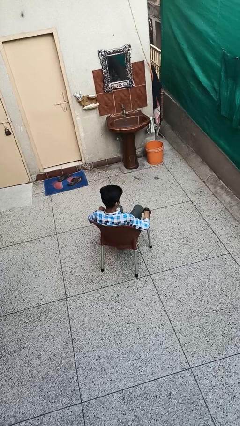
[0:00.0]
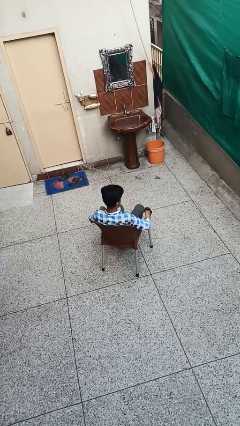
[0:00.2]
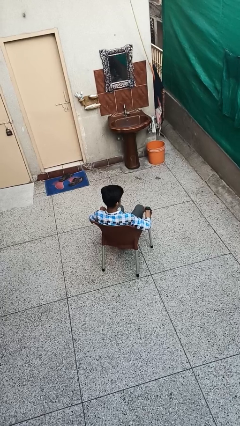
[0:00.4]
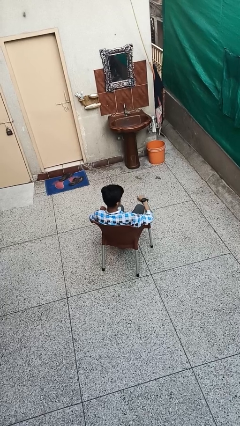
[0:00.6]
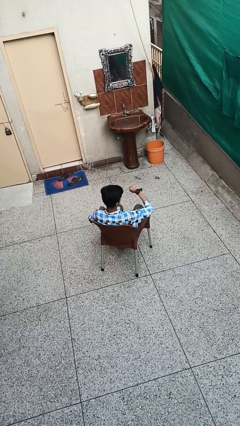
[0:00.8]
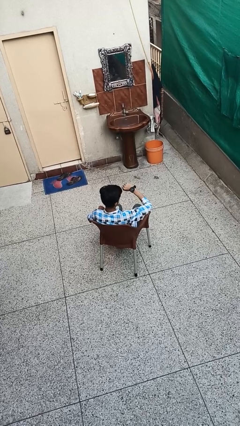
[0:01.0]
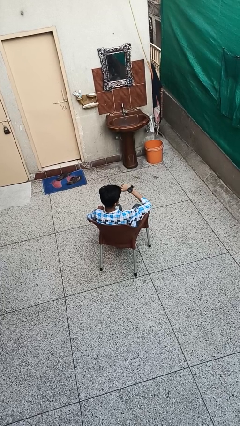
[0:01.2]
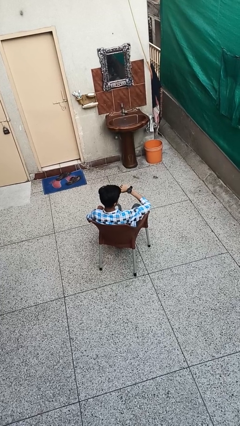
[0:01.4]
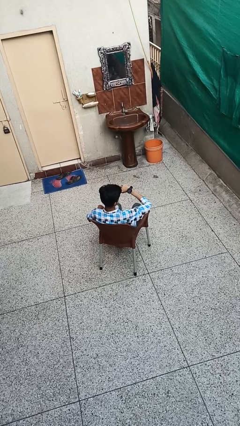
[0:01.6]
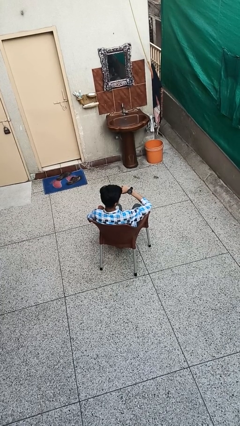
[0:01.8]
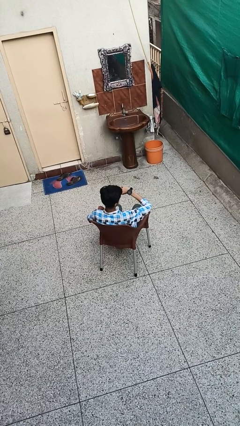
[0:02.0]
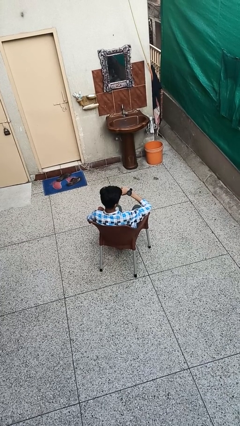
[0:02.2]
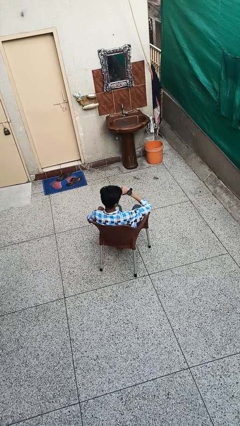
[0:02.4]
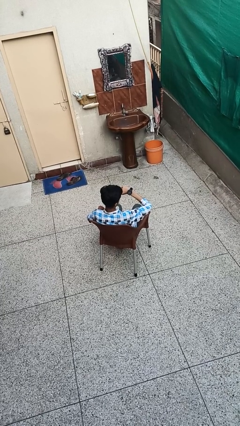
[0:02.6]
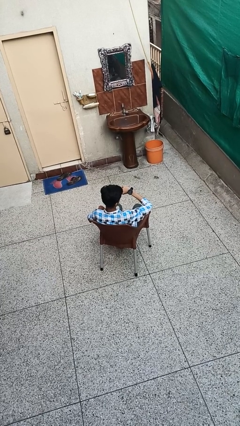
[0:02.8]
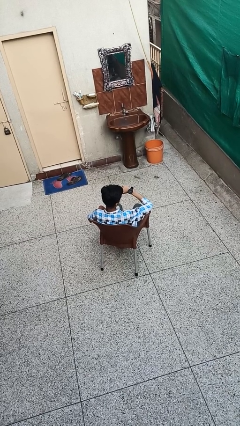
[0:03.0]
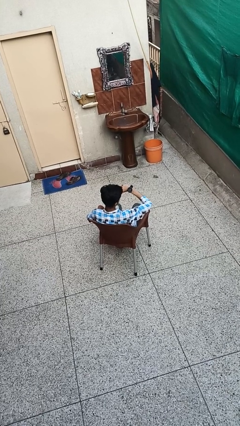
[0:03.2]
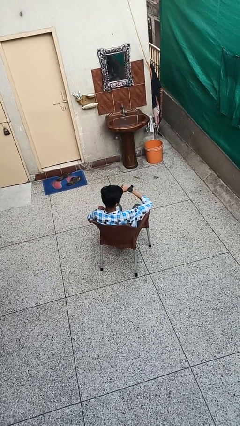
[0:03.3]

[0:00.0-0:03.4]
person looks at wristwatch

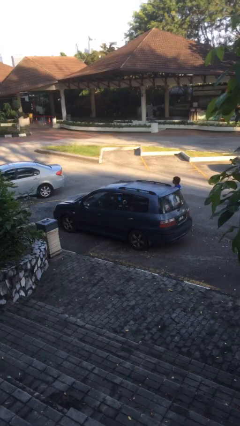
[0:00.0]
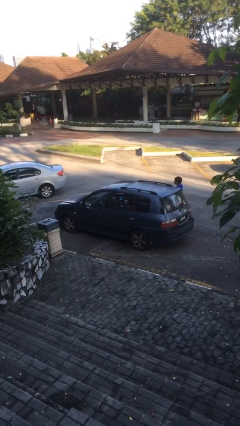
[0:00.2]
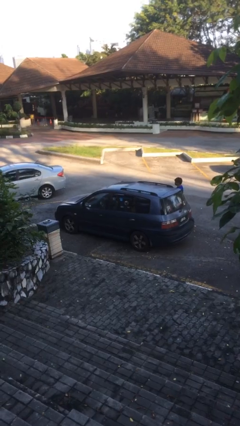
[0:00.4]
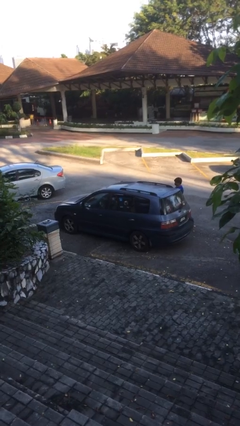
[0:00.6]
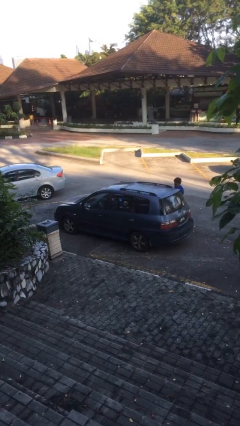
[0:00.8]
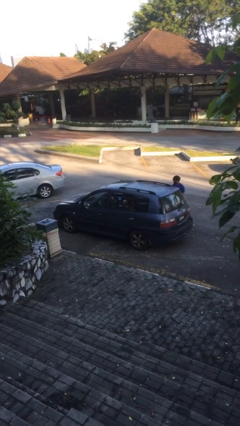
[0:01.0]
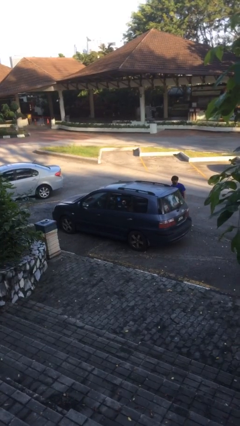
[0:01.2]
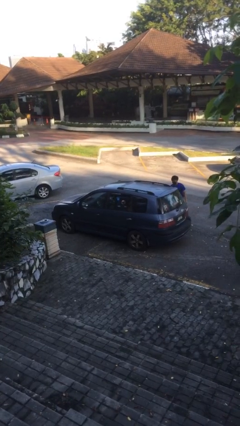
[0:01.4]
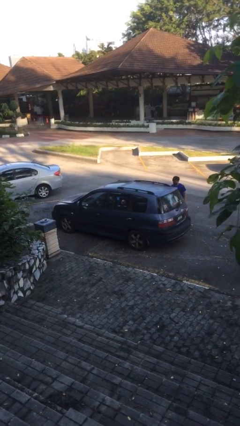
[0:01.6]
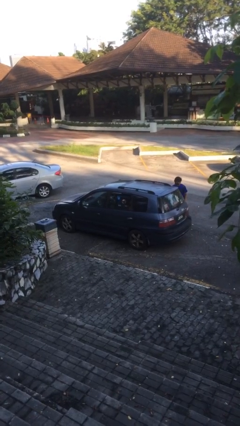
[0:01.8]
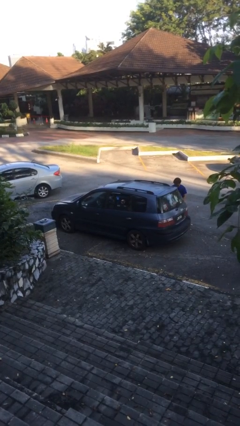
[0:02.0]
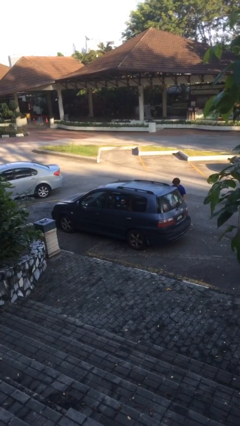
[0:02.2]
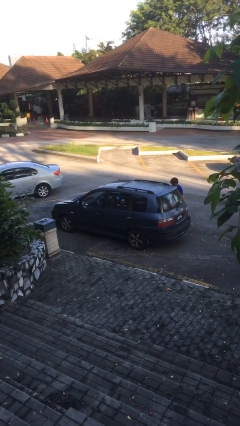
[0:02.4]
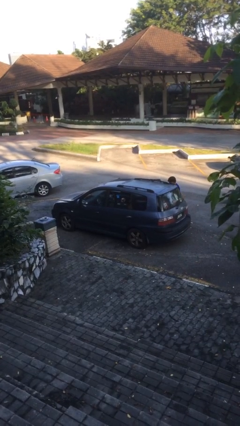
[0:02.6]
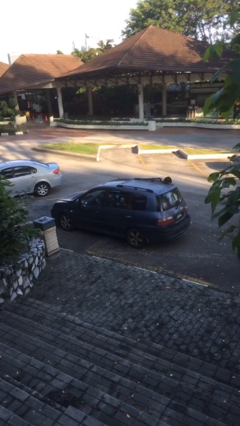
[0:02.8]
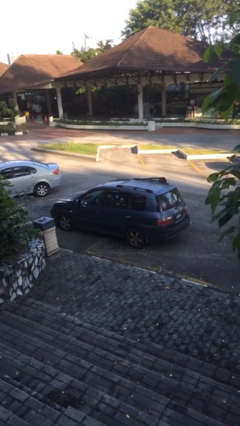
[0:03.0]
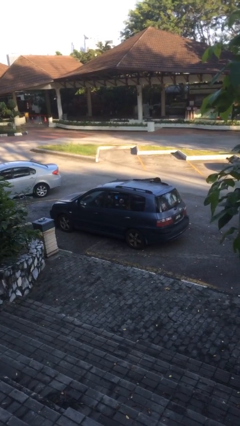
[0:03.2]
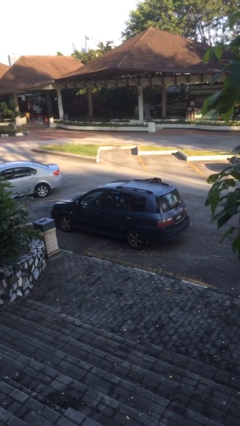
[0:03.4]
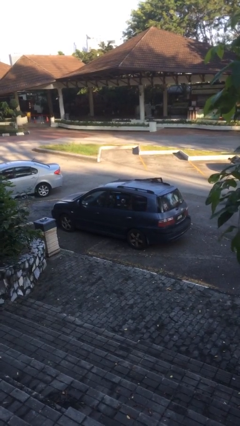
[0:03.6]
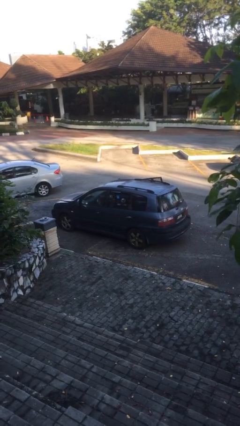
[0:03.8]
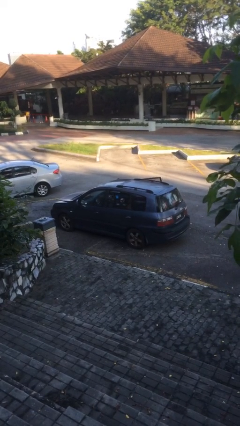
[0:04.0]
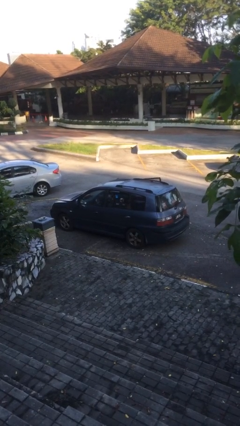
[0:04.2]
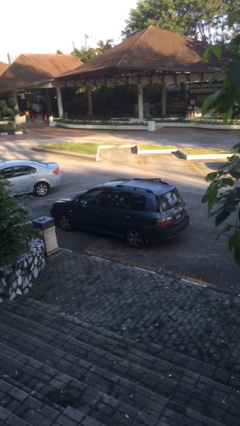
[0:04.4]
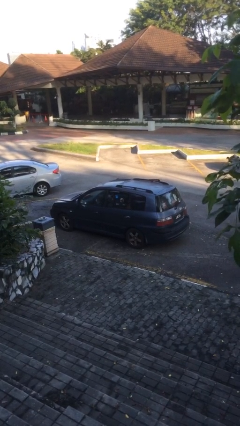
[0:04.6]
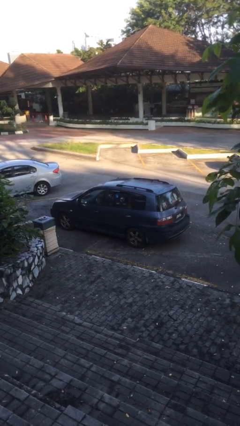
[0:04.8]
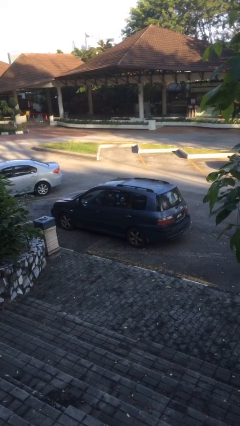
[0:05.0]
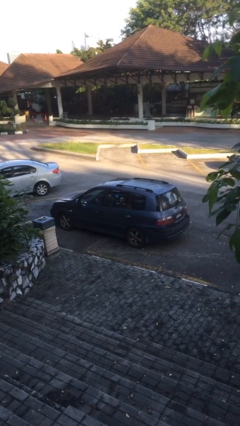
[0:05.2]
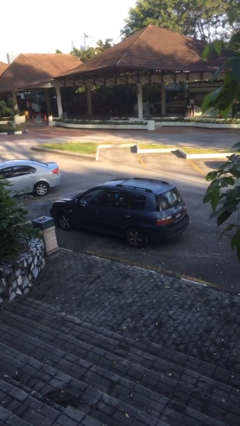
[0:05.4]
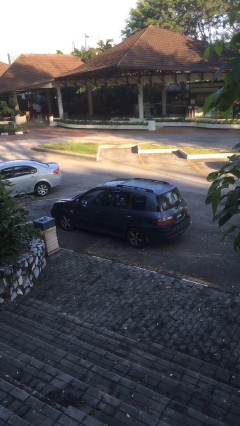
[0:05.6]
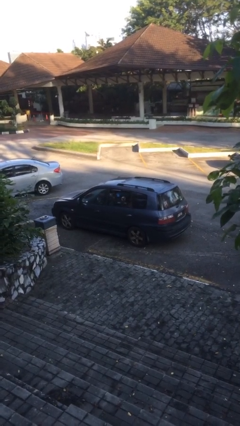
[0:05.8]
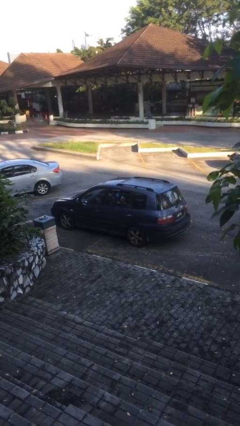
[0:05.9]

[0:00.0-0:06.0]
car picks up person

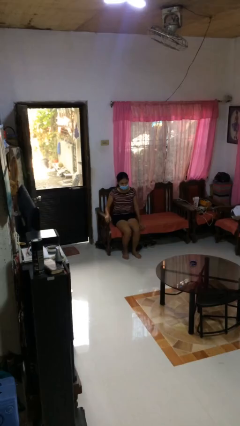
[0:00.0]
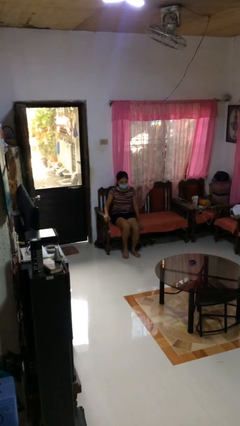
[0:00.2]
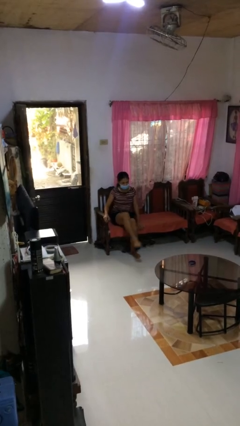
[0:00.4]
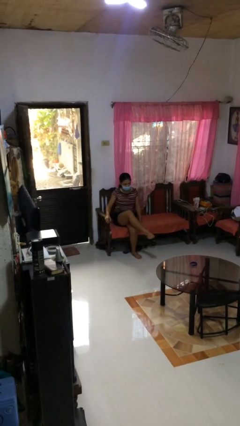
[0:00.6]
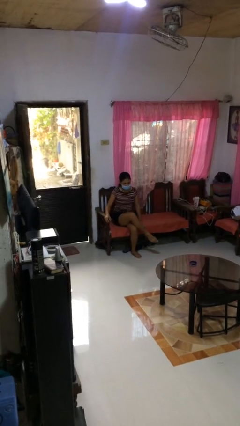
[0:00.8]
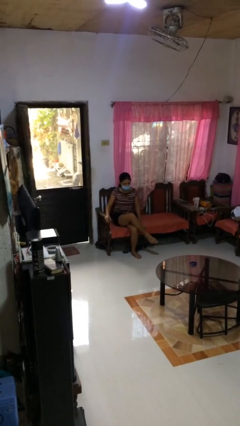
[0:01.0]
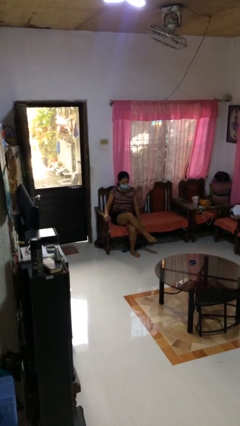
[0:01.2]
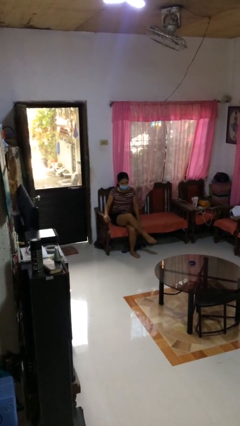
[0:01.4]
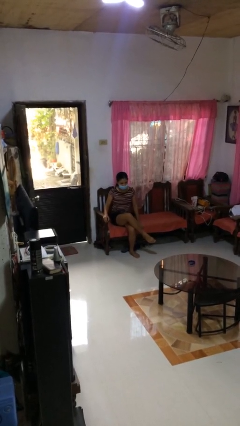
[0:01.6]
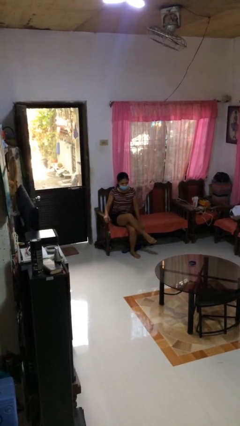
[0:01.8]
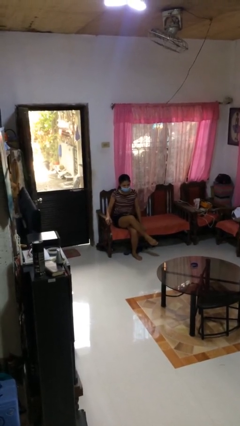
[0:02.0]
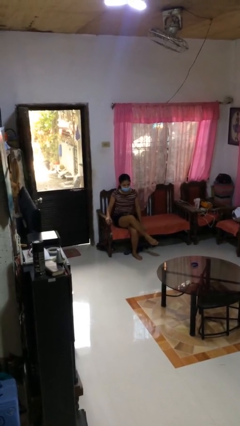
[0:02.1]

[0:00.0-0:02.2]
person crosses legs

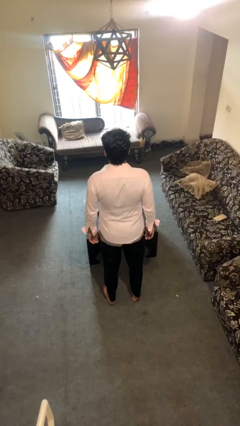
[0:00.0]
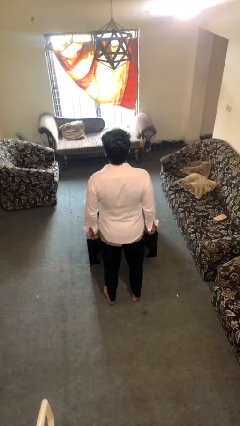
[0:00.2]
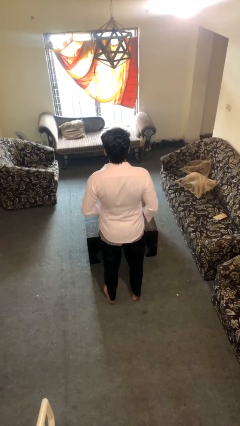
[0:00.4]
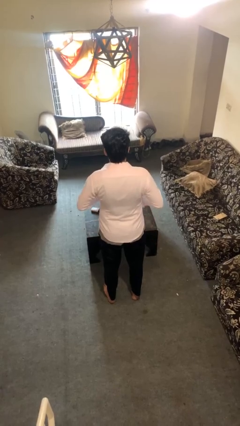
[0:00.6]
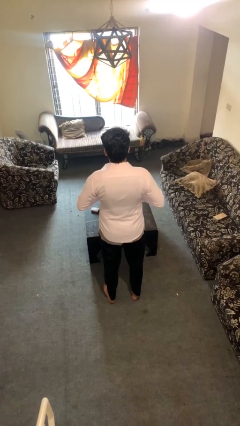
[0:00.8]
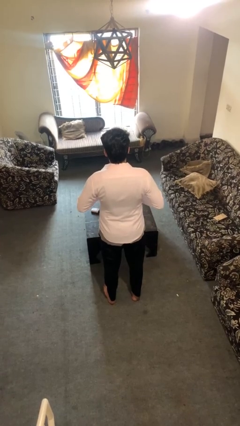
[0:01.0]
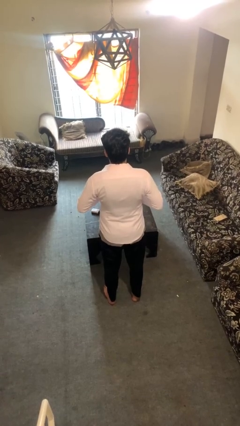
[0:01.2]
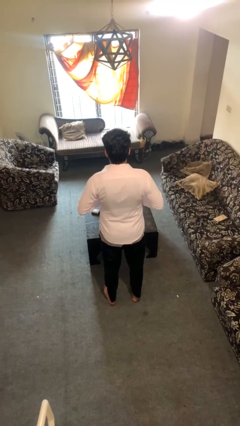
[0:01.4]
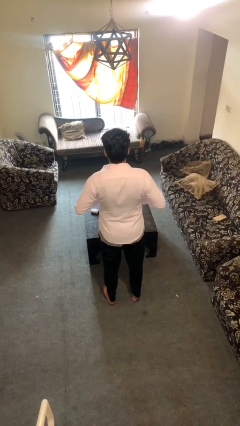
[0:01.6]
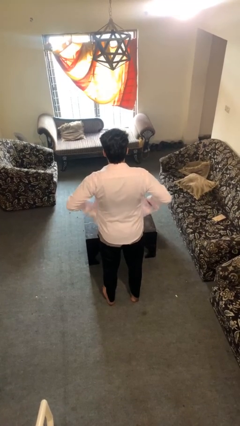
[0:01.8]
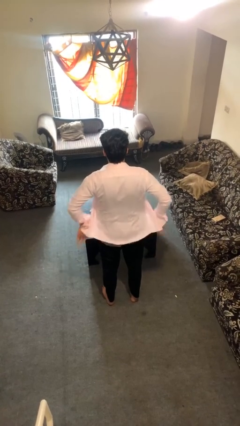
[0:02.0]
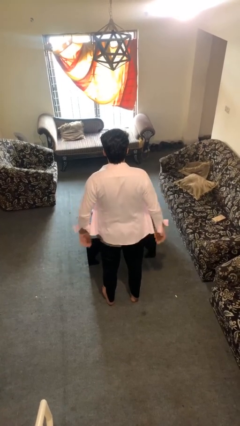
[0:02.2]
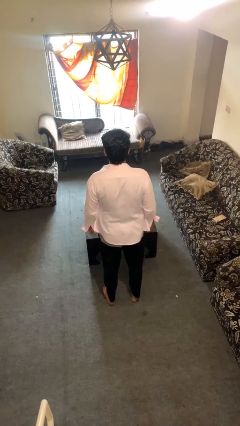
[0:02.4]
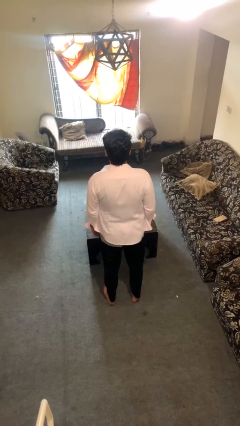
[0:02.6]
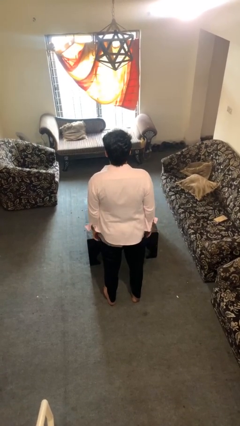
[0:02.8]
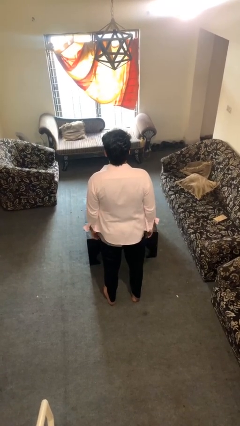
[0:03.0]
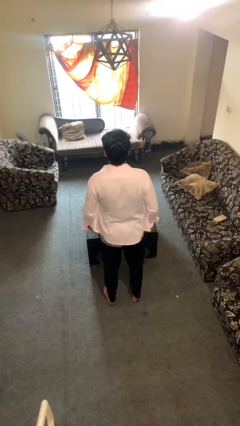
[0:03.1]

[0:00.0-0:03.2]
person unbuttons shirt

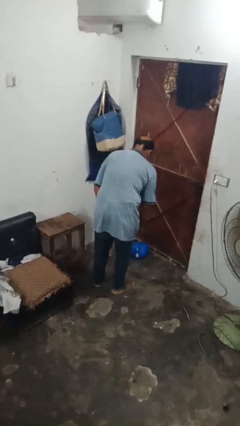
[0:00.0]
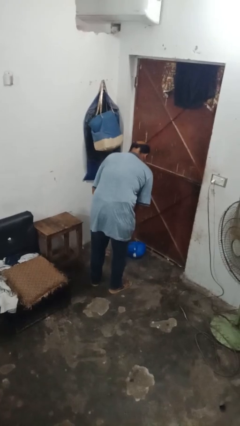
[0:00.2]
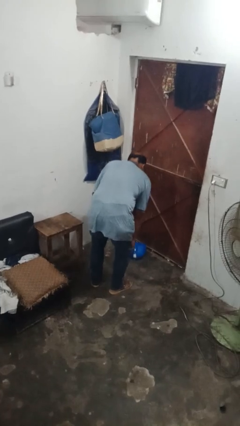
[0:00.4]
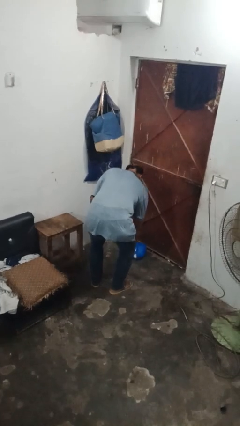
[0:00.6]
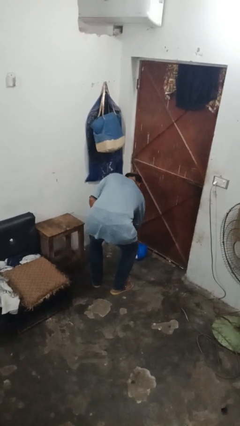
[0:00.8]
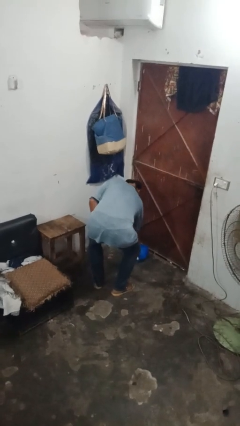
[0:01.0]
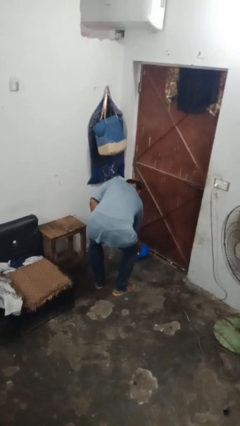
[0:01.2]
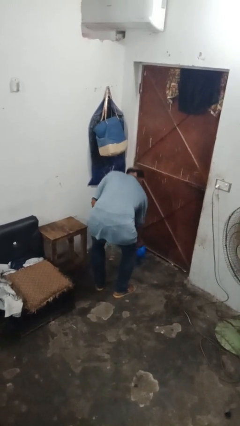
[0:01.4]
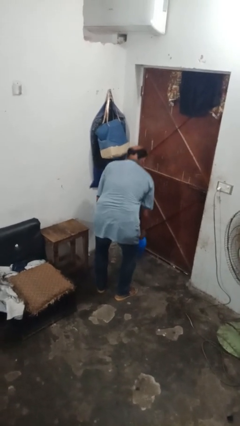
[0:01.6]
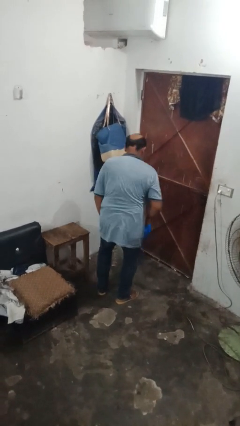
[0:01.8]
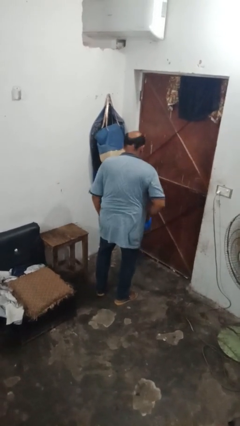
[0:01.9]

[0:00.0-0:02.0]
person picks up object from floor

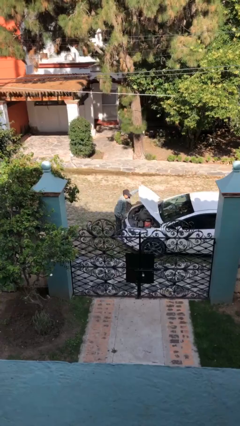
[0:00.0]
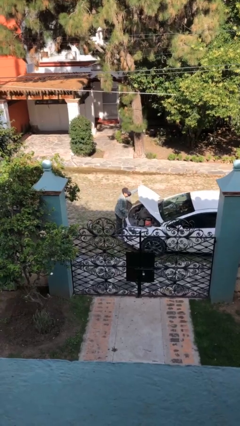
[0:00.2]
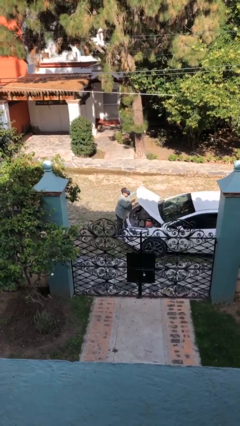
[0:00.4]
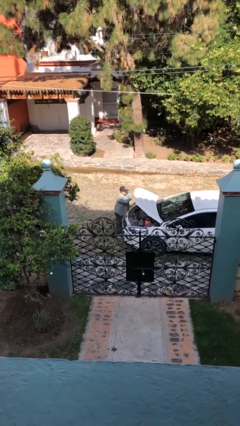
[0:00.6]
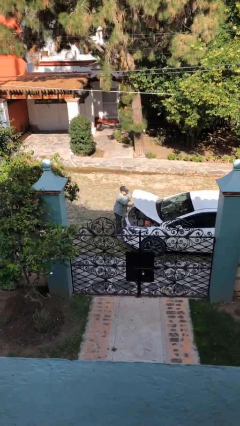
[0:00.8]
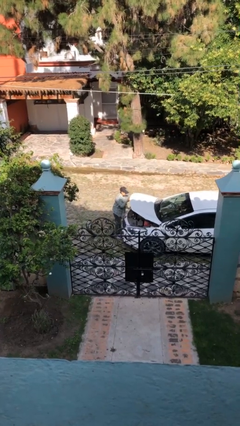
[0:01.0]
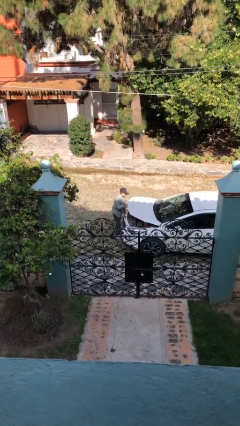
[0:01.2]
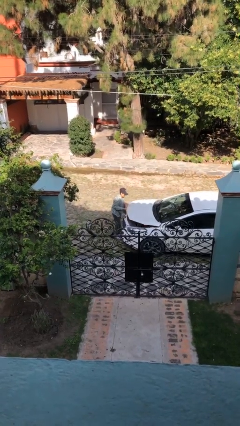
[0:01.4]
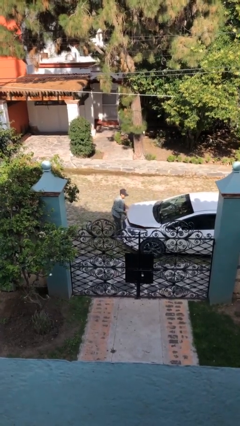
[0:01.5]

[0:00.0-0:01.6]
person closes car hood
